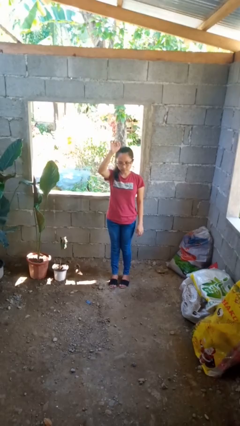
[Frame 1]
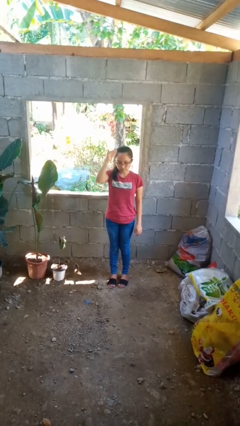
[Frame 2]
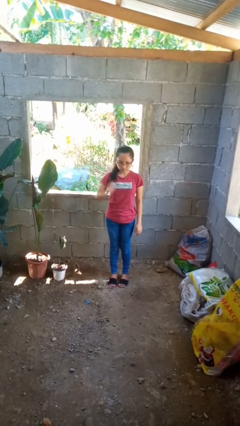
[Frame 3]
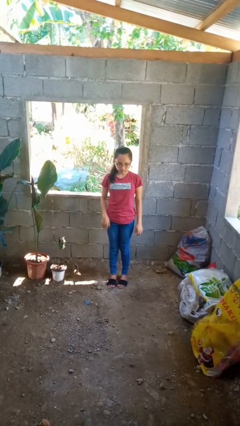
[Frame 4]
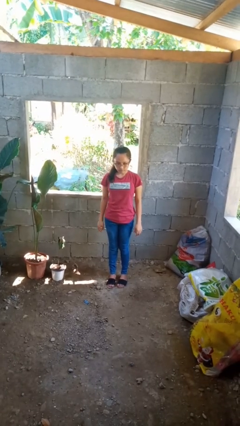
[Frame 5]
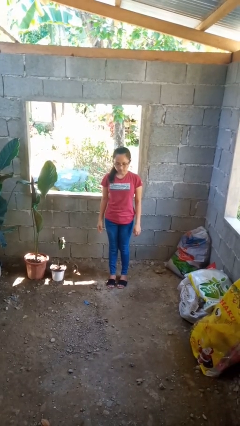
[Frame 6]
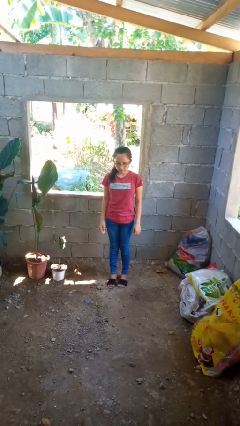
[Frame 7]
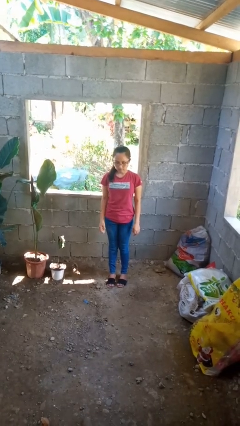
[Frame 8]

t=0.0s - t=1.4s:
person gestures lower hand

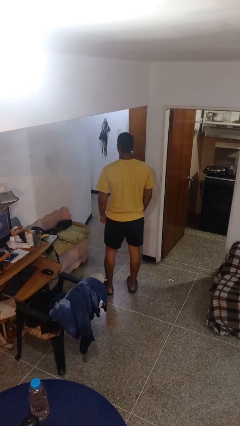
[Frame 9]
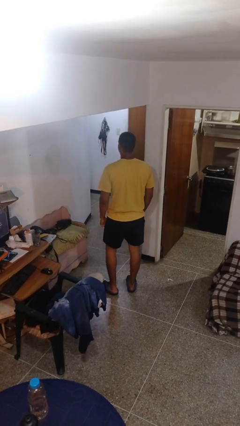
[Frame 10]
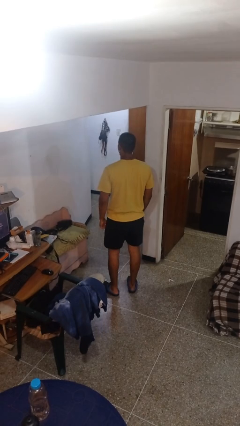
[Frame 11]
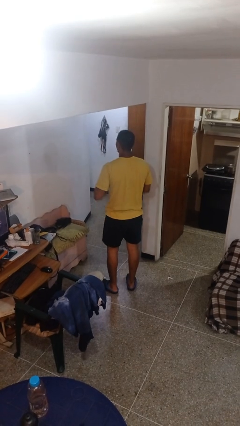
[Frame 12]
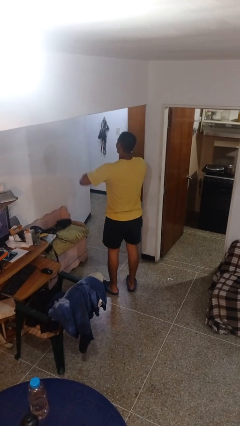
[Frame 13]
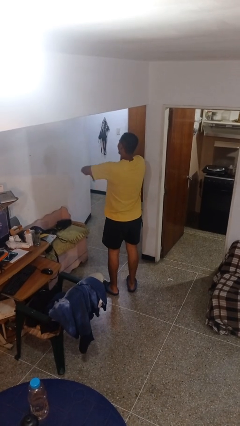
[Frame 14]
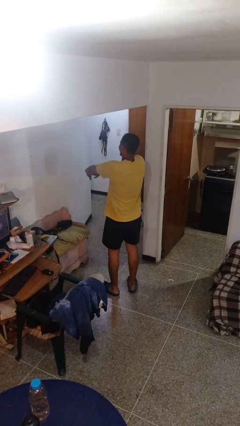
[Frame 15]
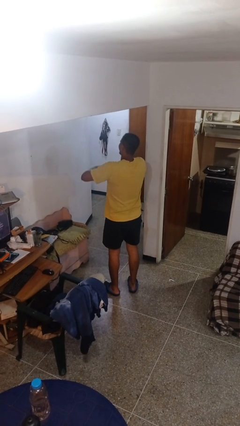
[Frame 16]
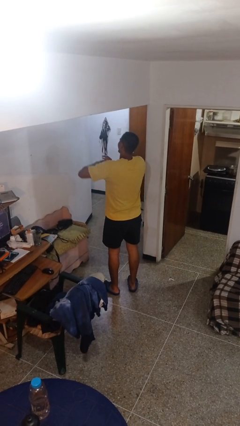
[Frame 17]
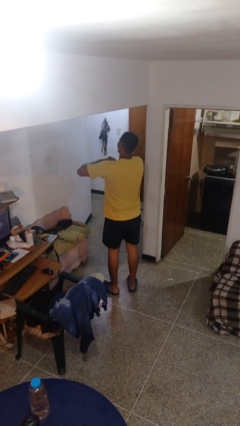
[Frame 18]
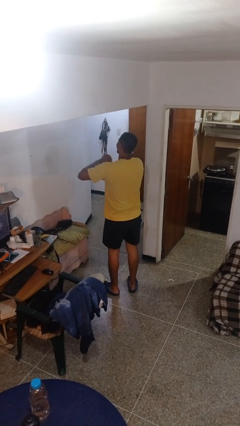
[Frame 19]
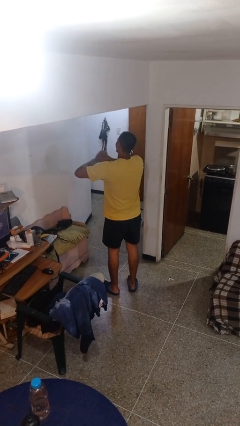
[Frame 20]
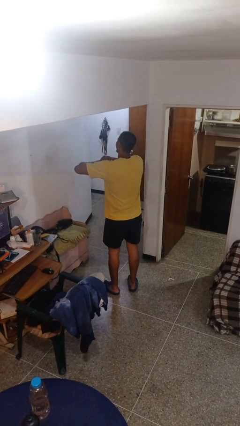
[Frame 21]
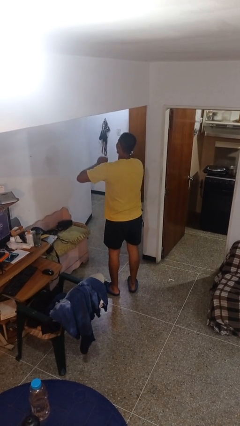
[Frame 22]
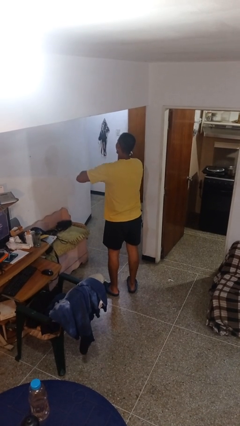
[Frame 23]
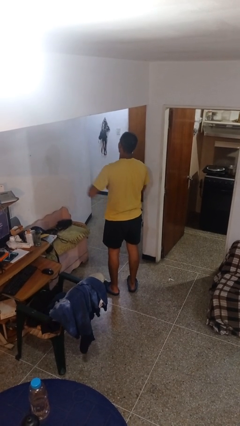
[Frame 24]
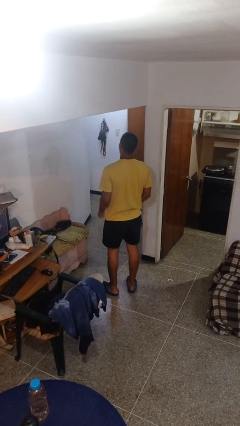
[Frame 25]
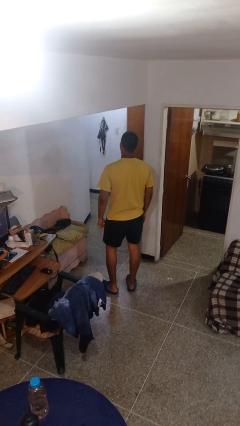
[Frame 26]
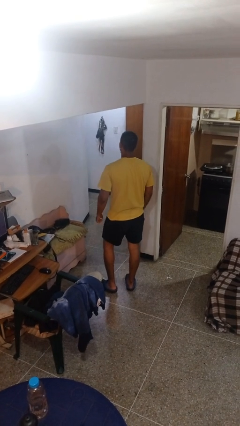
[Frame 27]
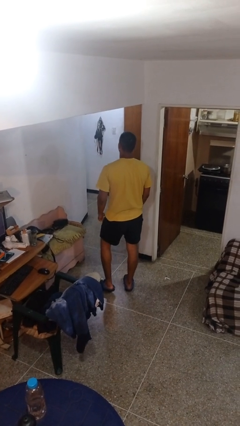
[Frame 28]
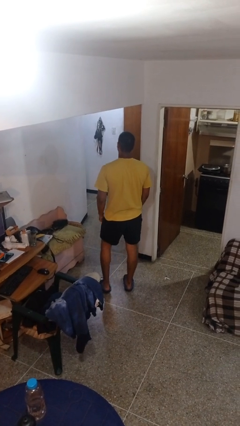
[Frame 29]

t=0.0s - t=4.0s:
person cracks knuckles

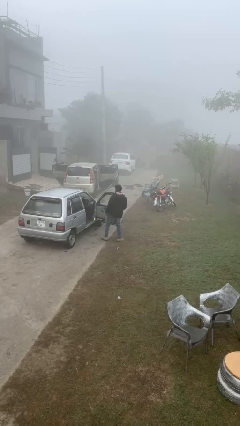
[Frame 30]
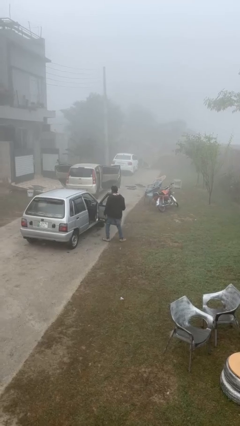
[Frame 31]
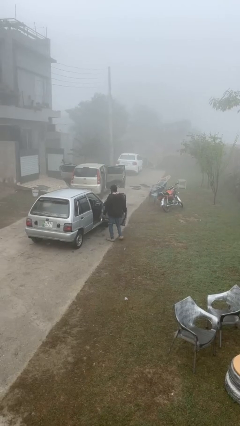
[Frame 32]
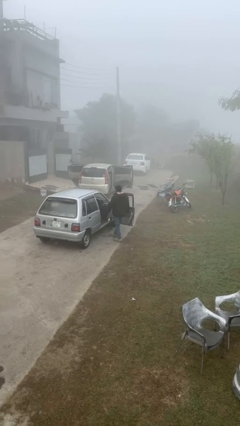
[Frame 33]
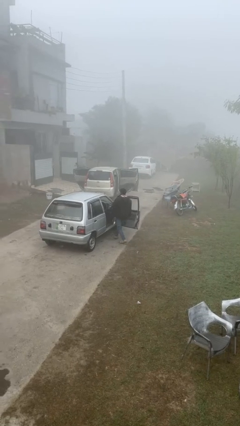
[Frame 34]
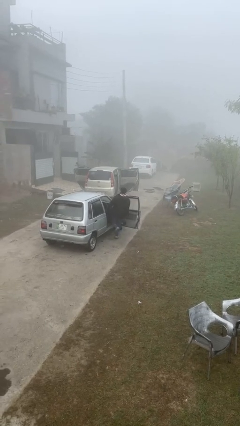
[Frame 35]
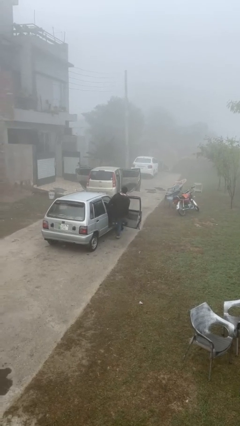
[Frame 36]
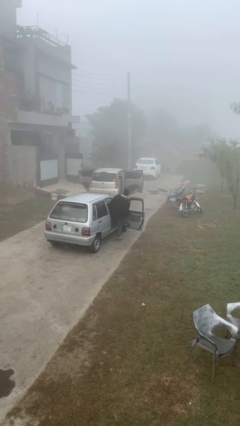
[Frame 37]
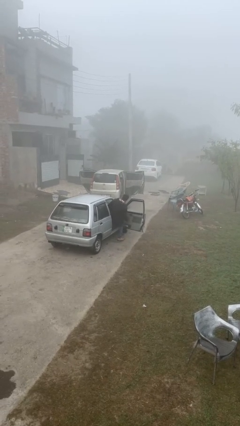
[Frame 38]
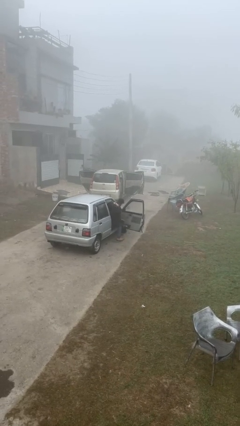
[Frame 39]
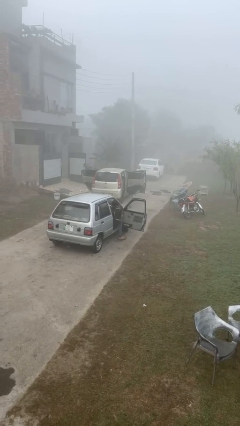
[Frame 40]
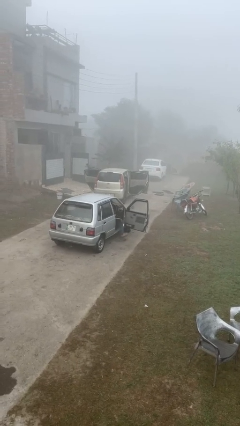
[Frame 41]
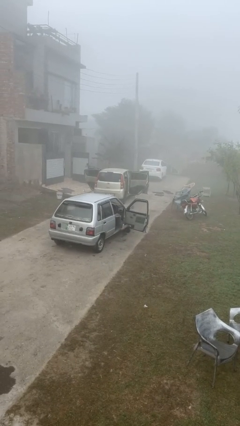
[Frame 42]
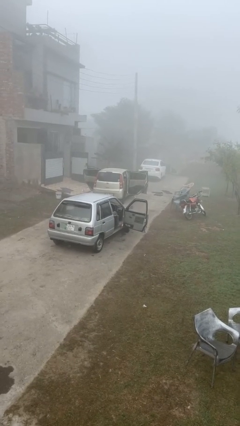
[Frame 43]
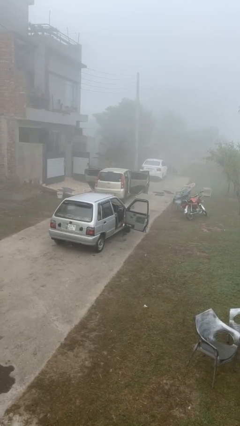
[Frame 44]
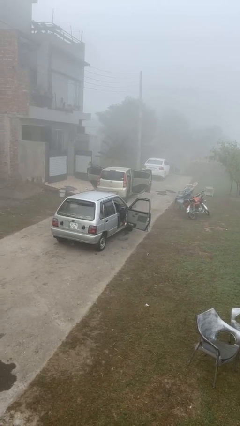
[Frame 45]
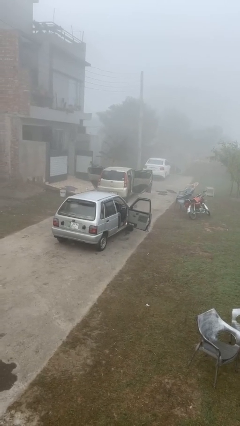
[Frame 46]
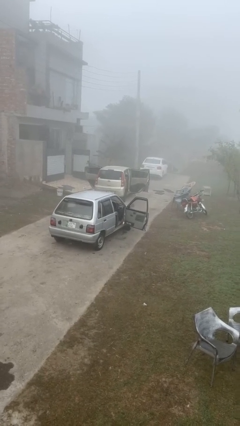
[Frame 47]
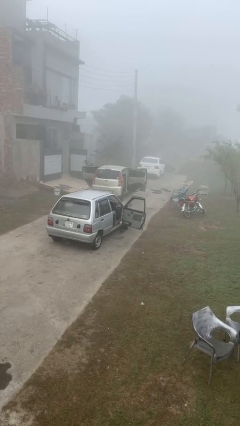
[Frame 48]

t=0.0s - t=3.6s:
person enters car

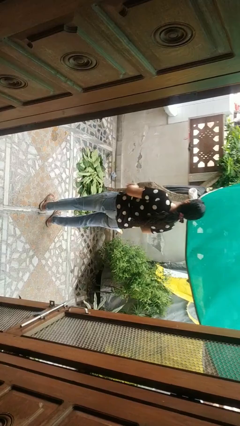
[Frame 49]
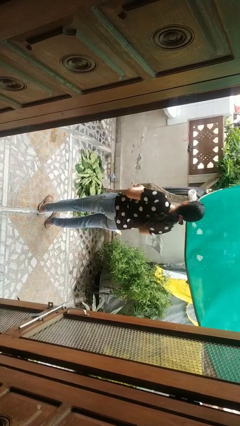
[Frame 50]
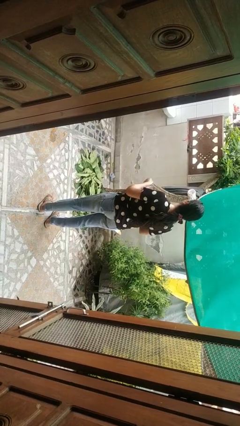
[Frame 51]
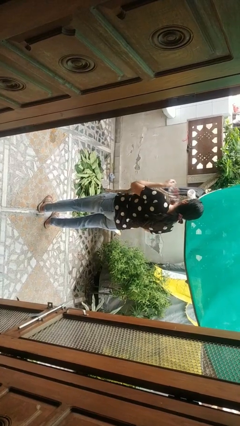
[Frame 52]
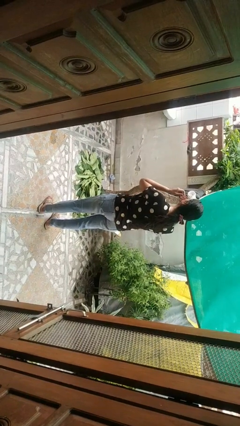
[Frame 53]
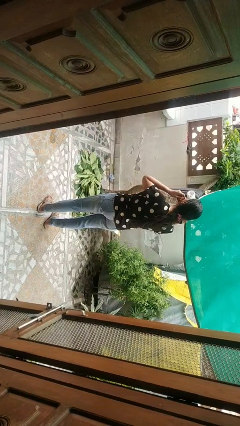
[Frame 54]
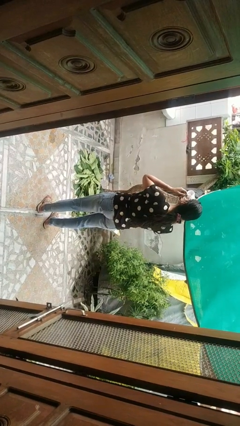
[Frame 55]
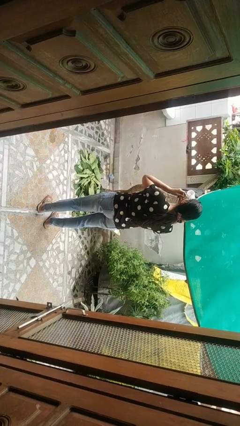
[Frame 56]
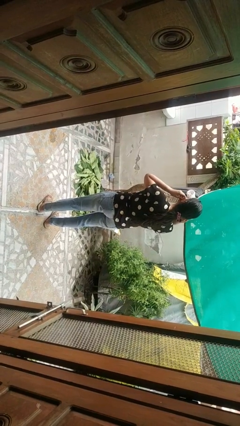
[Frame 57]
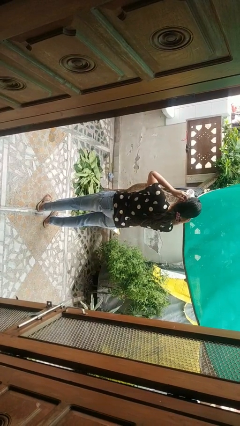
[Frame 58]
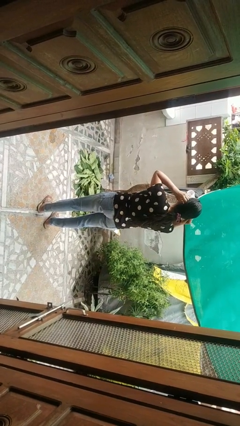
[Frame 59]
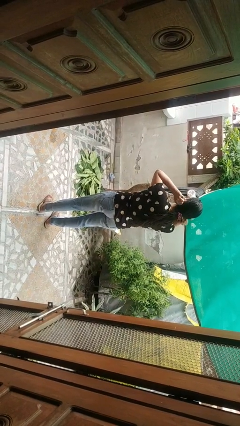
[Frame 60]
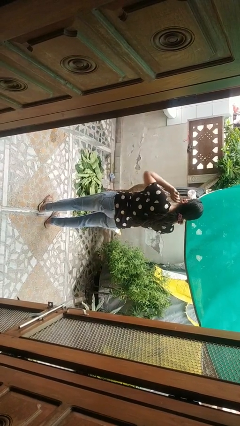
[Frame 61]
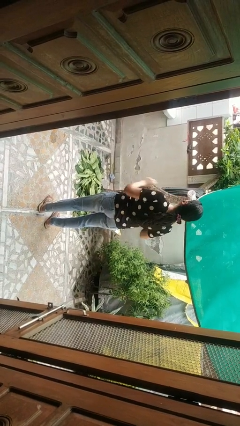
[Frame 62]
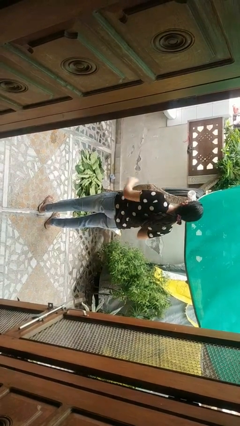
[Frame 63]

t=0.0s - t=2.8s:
person puts on facemask

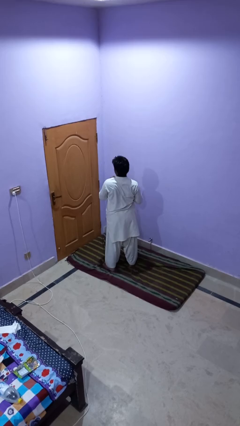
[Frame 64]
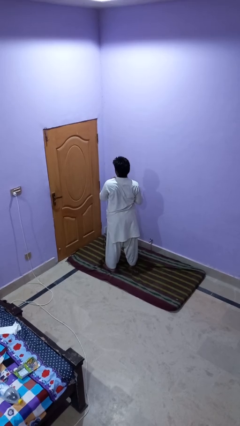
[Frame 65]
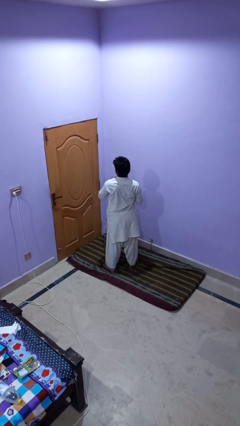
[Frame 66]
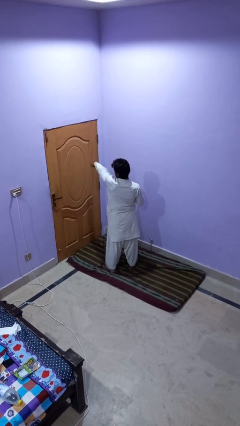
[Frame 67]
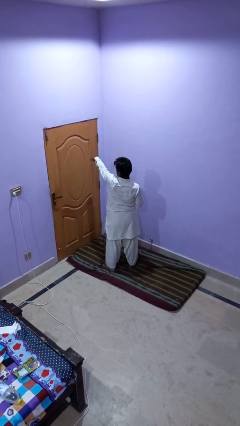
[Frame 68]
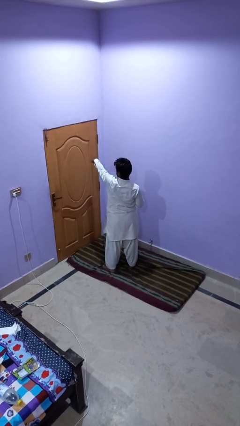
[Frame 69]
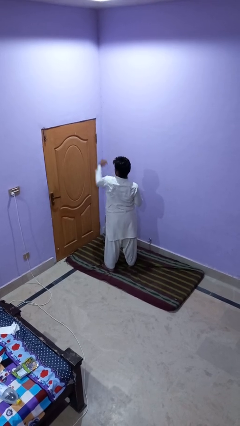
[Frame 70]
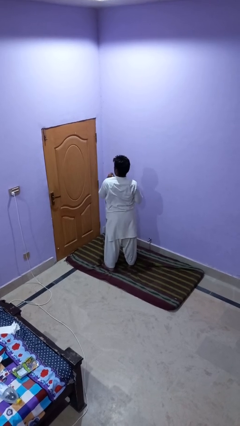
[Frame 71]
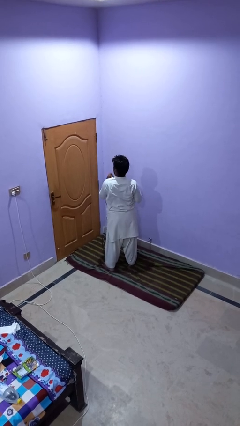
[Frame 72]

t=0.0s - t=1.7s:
person punches

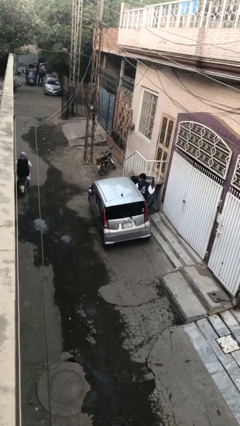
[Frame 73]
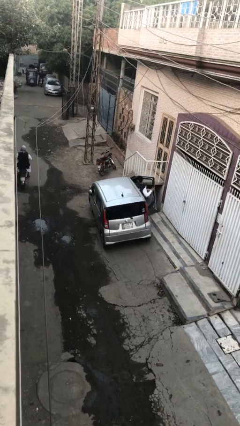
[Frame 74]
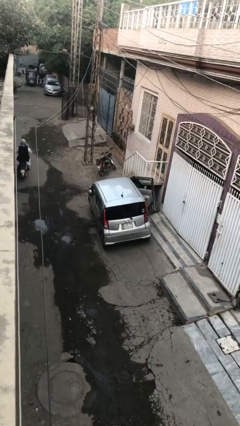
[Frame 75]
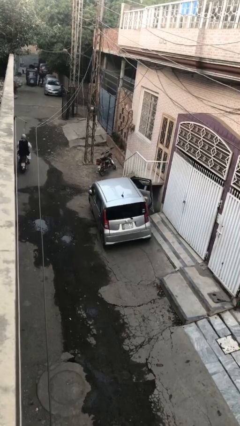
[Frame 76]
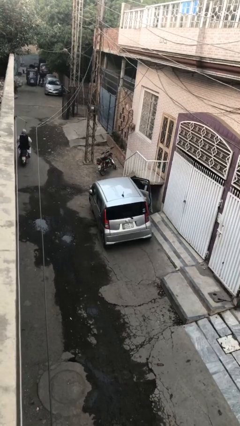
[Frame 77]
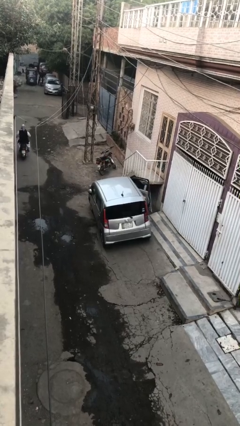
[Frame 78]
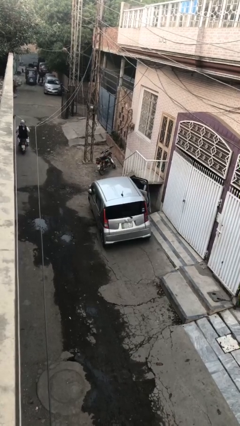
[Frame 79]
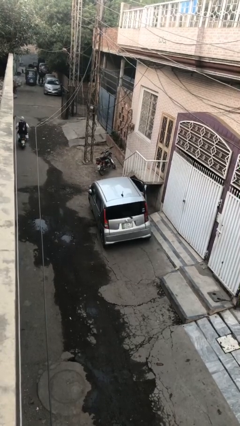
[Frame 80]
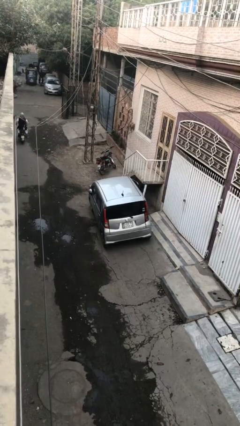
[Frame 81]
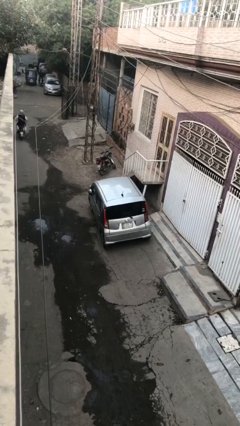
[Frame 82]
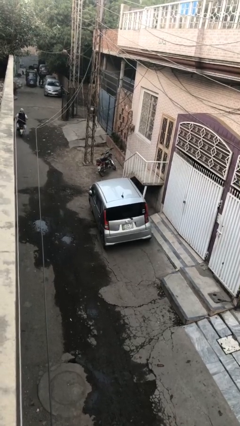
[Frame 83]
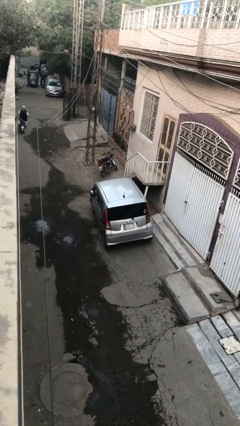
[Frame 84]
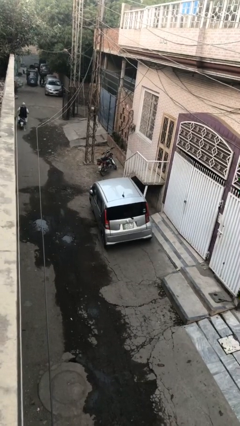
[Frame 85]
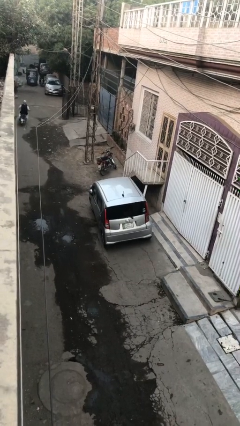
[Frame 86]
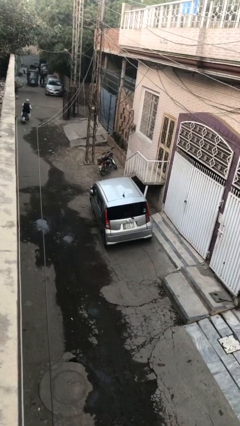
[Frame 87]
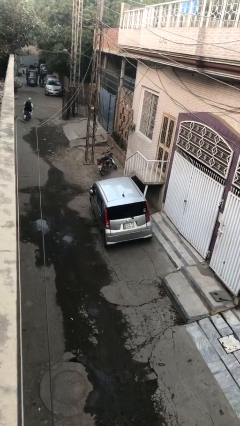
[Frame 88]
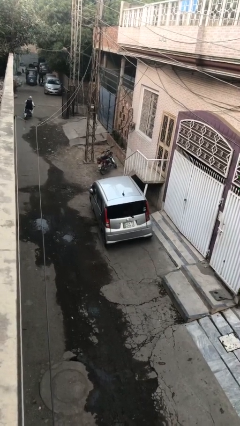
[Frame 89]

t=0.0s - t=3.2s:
car picks up person

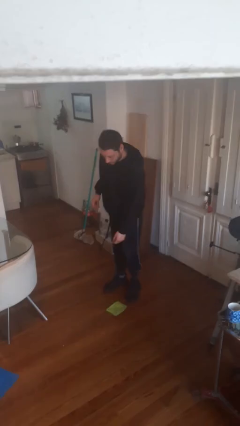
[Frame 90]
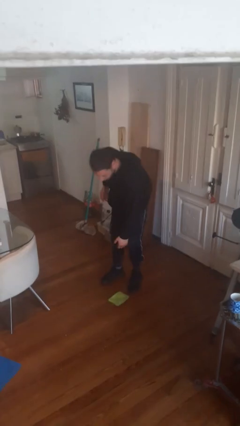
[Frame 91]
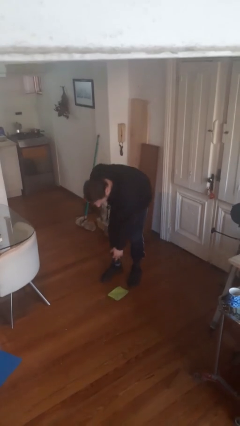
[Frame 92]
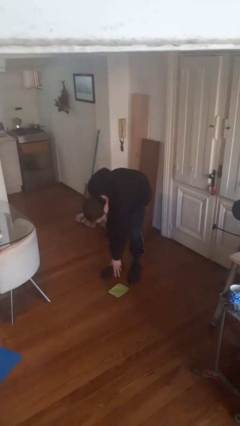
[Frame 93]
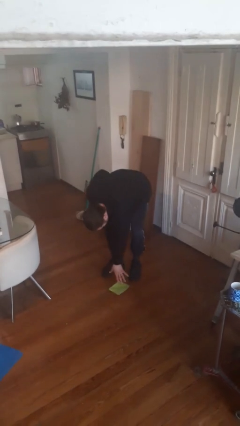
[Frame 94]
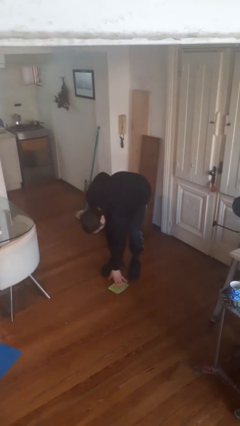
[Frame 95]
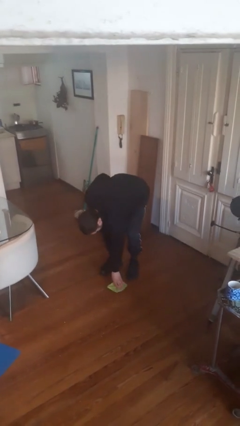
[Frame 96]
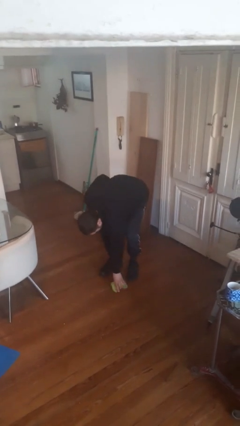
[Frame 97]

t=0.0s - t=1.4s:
person drops object
